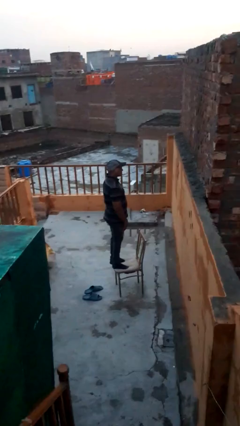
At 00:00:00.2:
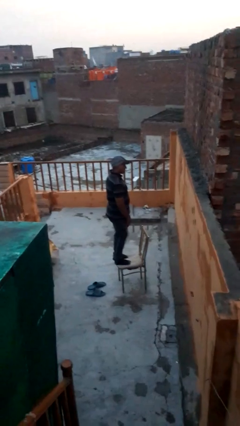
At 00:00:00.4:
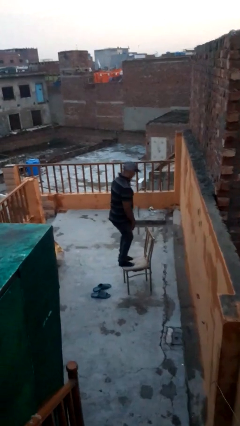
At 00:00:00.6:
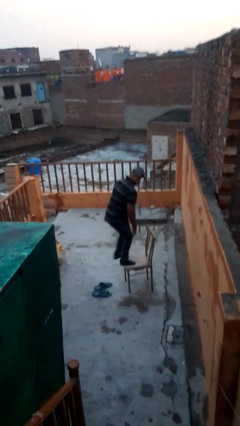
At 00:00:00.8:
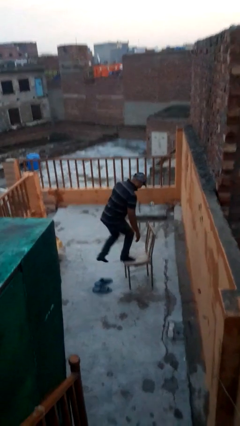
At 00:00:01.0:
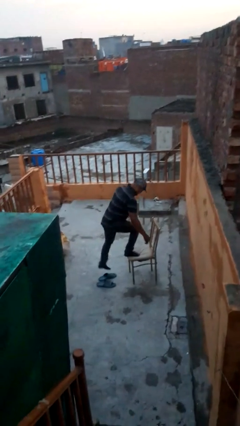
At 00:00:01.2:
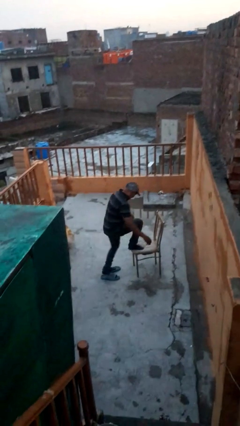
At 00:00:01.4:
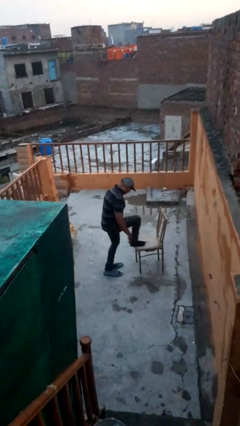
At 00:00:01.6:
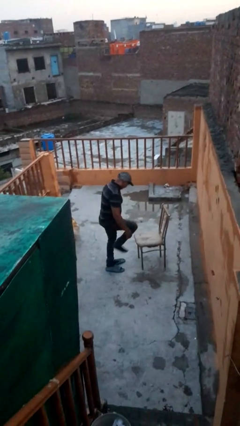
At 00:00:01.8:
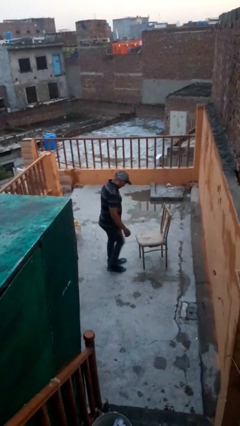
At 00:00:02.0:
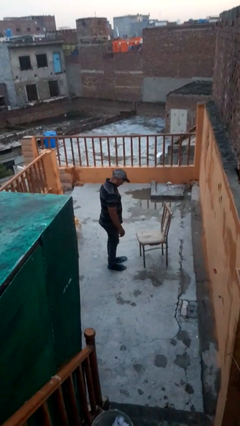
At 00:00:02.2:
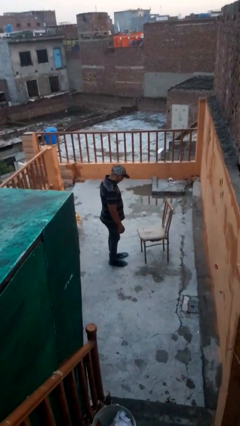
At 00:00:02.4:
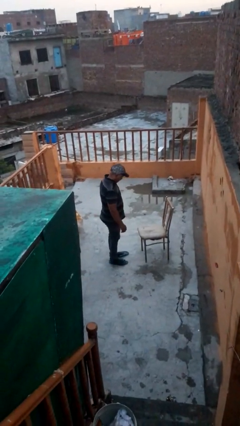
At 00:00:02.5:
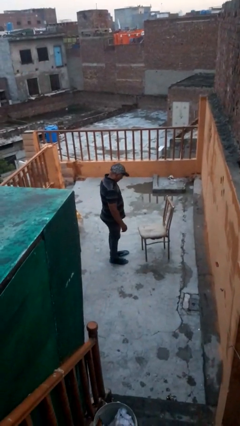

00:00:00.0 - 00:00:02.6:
person climbs off chair

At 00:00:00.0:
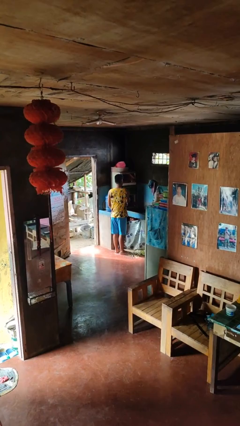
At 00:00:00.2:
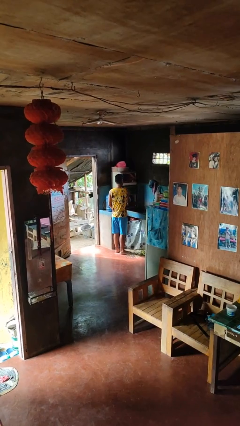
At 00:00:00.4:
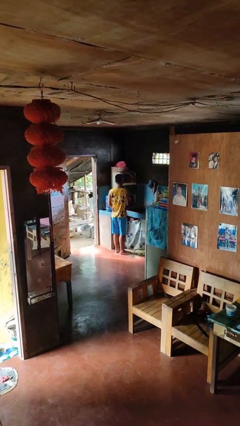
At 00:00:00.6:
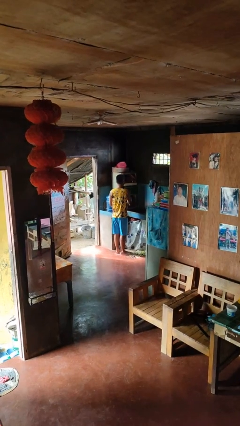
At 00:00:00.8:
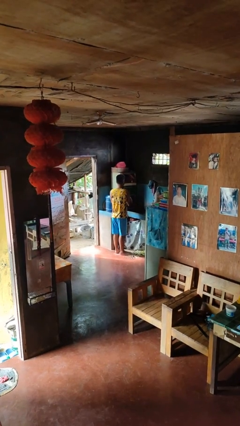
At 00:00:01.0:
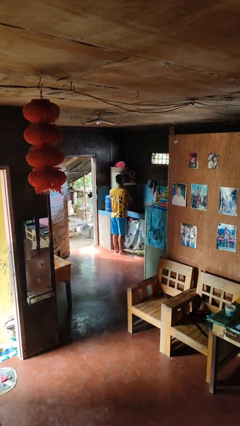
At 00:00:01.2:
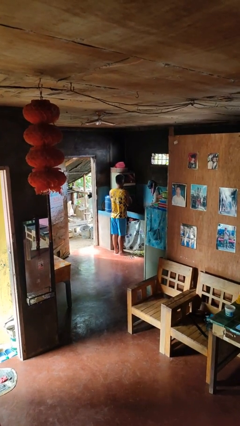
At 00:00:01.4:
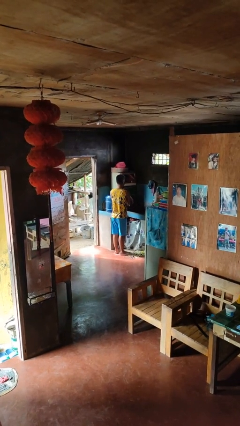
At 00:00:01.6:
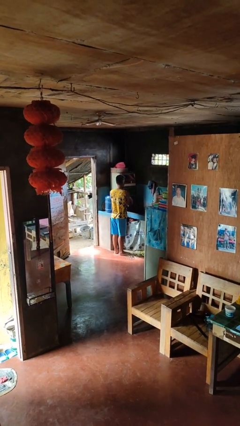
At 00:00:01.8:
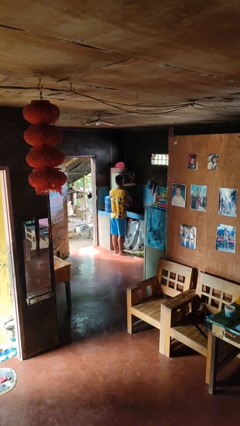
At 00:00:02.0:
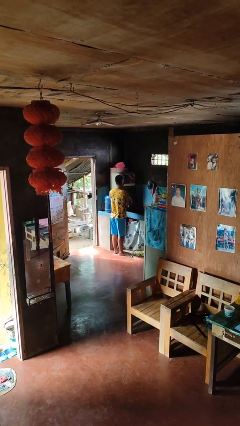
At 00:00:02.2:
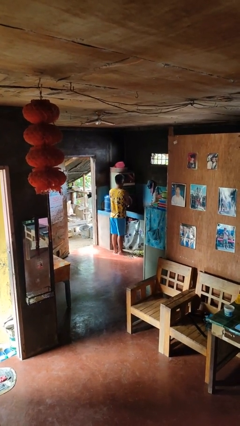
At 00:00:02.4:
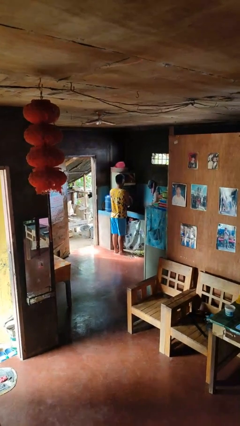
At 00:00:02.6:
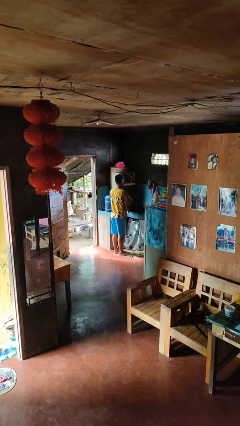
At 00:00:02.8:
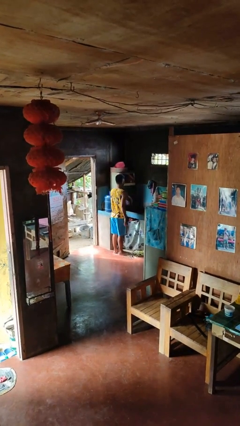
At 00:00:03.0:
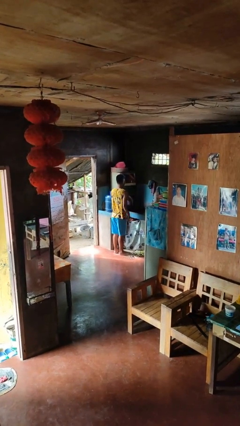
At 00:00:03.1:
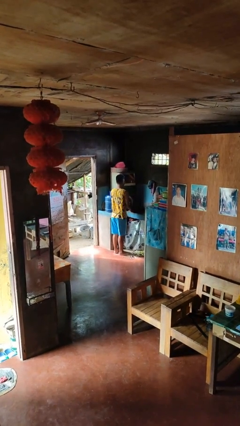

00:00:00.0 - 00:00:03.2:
person opens dishwasher

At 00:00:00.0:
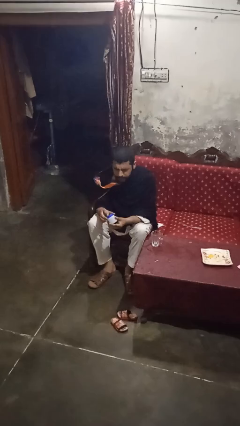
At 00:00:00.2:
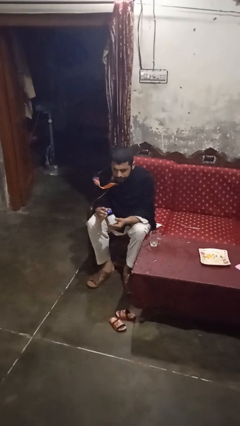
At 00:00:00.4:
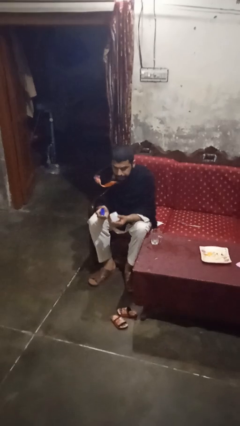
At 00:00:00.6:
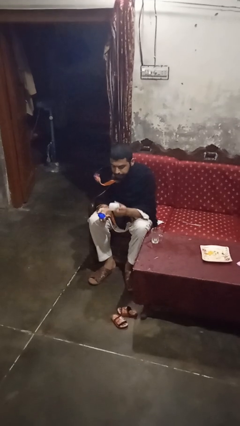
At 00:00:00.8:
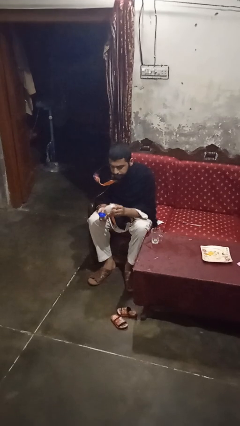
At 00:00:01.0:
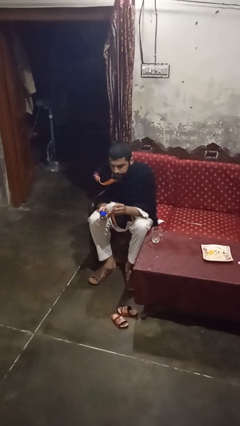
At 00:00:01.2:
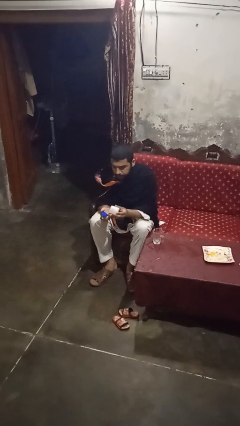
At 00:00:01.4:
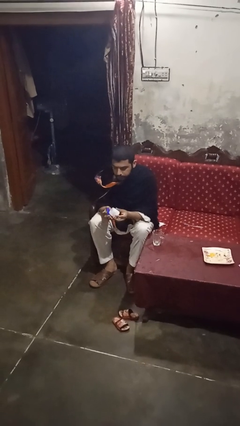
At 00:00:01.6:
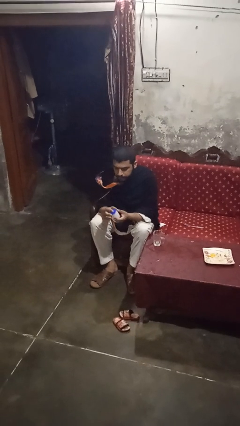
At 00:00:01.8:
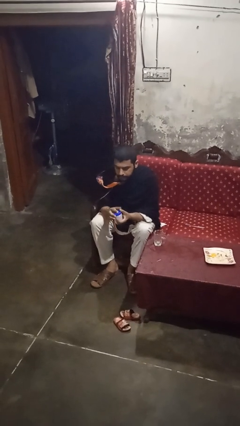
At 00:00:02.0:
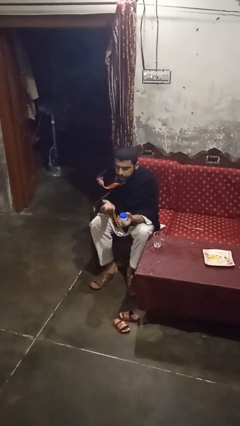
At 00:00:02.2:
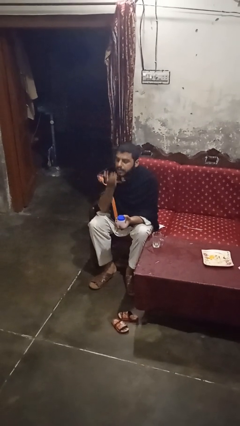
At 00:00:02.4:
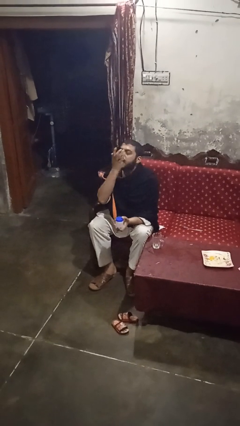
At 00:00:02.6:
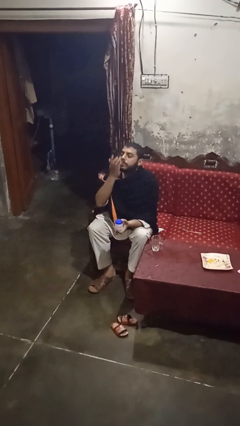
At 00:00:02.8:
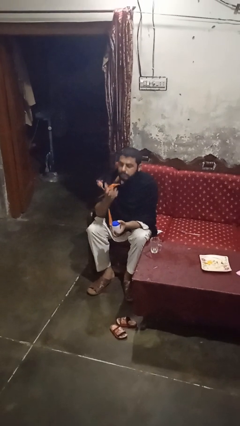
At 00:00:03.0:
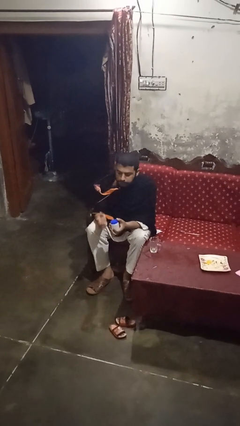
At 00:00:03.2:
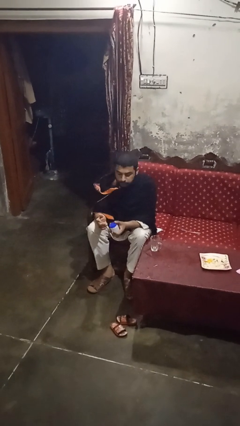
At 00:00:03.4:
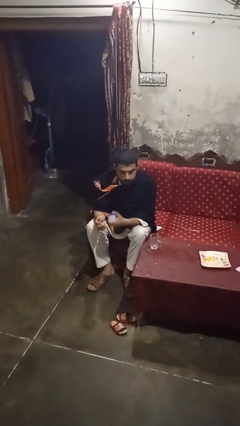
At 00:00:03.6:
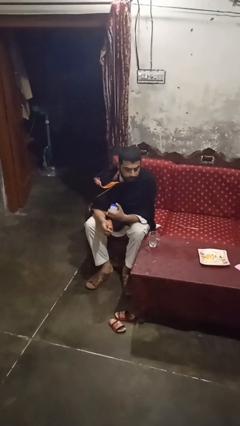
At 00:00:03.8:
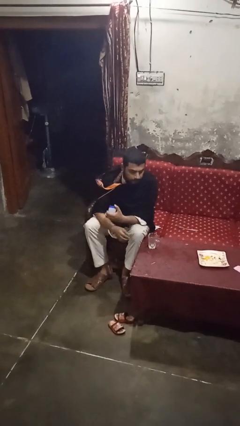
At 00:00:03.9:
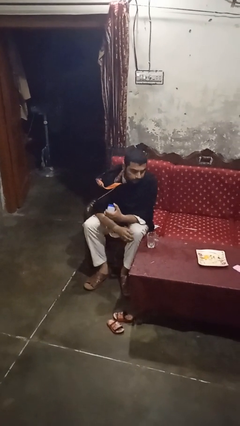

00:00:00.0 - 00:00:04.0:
person takes medicine pills

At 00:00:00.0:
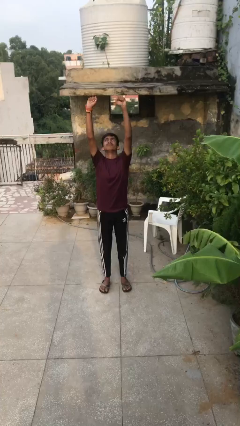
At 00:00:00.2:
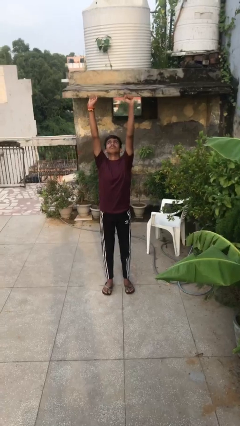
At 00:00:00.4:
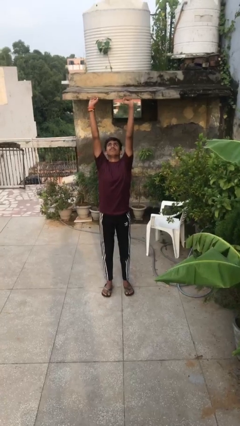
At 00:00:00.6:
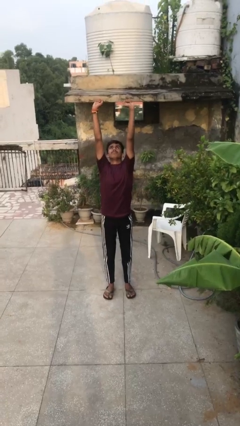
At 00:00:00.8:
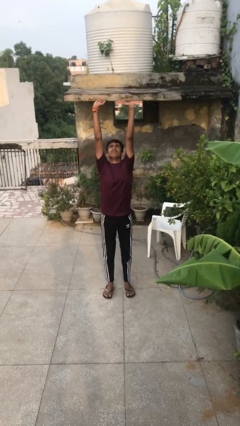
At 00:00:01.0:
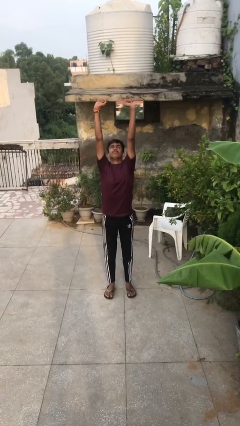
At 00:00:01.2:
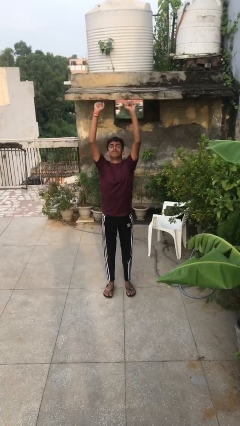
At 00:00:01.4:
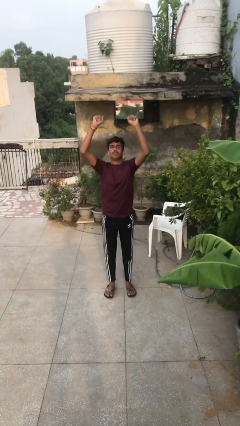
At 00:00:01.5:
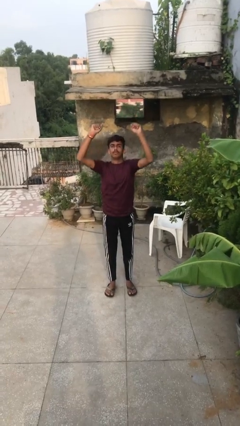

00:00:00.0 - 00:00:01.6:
person stretches arms over head

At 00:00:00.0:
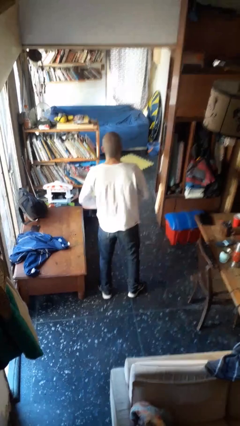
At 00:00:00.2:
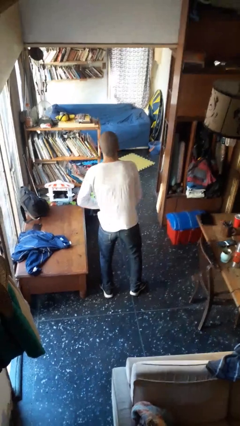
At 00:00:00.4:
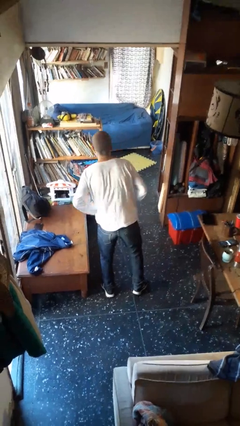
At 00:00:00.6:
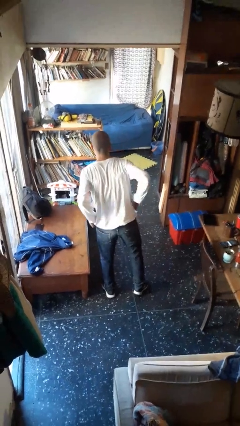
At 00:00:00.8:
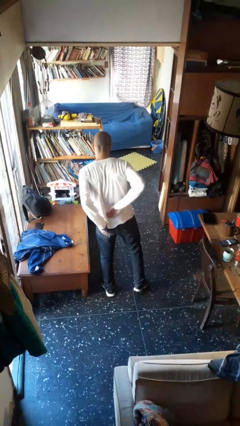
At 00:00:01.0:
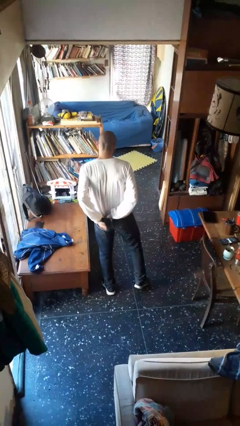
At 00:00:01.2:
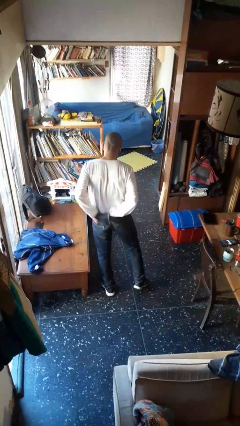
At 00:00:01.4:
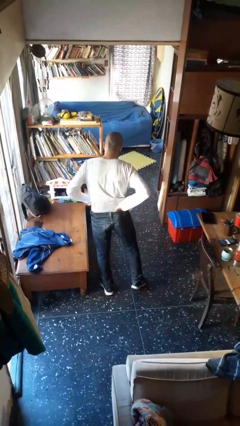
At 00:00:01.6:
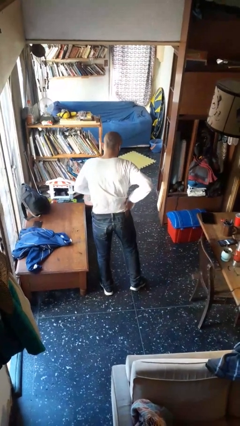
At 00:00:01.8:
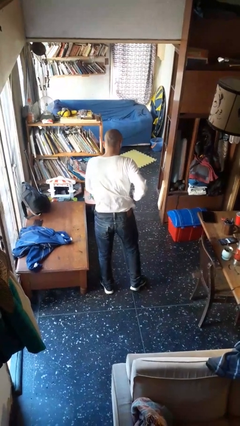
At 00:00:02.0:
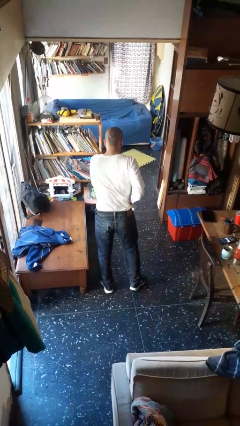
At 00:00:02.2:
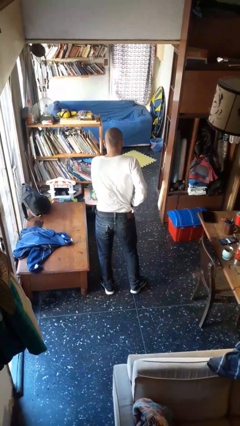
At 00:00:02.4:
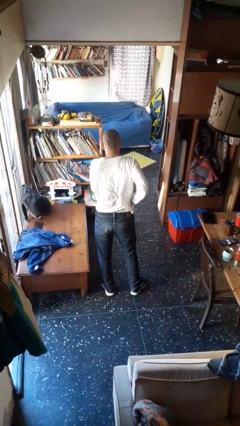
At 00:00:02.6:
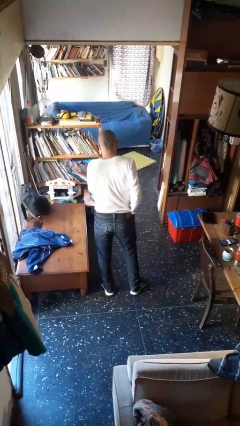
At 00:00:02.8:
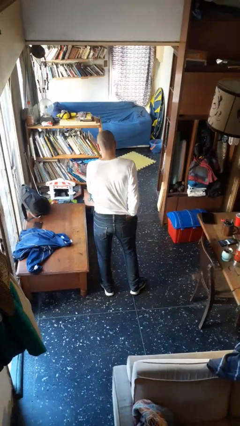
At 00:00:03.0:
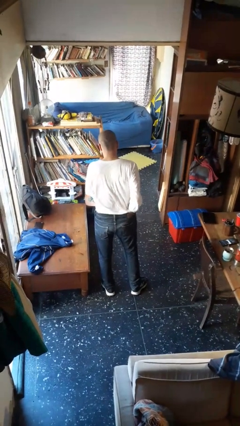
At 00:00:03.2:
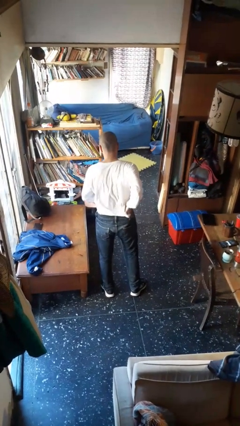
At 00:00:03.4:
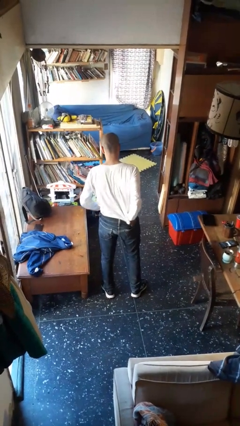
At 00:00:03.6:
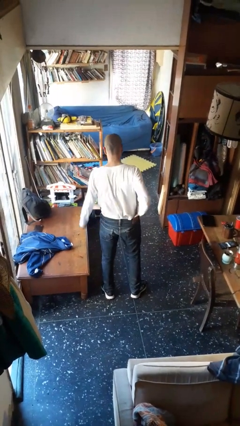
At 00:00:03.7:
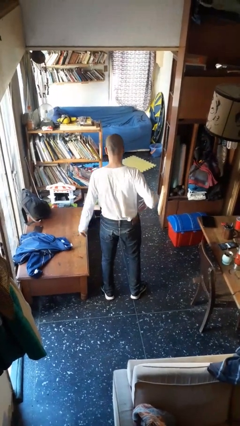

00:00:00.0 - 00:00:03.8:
person tucks in shirt

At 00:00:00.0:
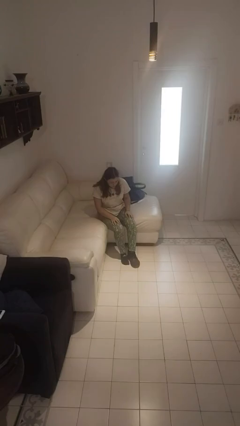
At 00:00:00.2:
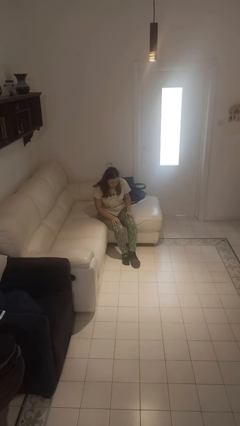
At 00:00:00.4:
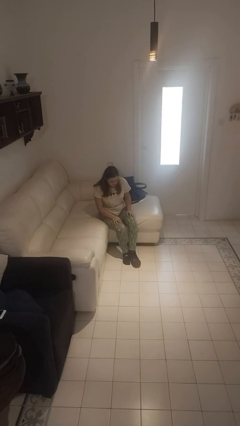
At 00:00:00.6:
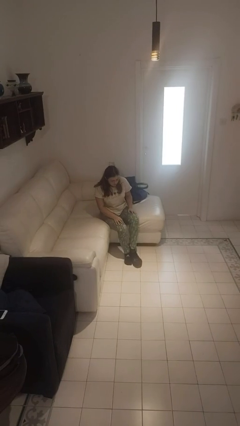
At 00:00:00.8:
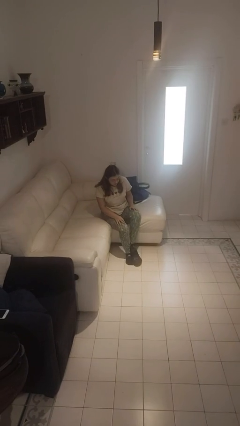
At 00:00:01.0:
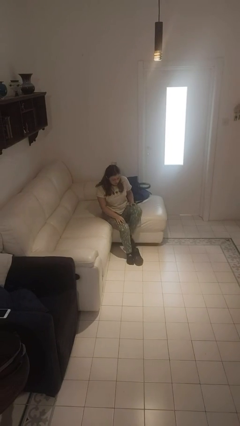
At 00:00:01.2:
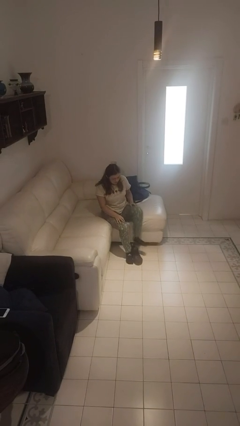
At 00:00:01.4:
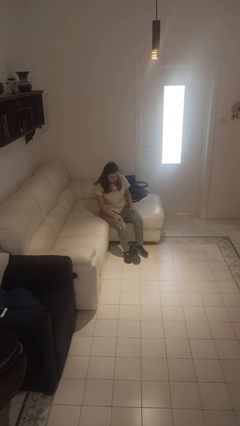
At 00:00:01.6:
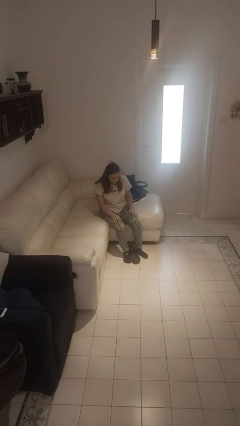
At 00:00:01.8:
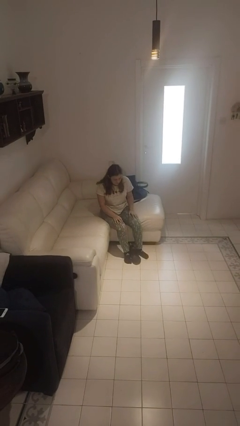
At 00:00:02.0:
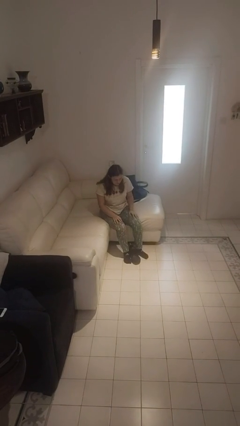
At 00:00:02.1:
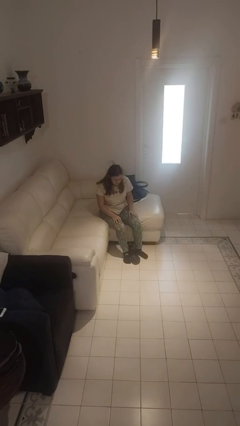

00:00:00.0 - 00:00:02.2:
person takes off shoes
